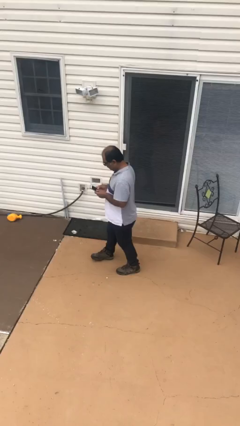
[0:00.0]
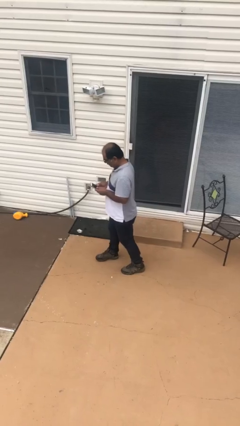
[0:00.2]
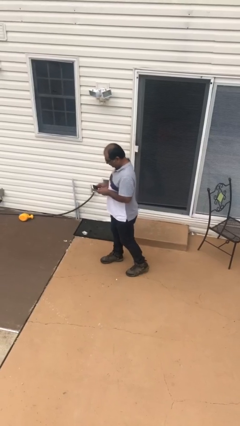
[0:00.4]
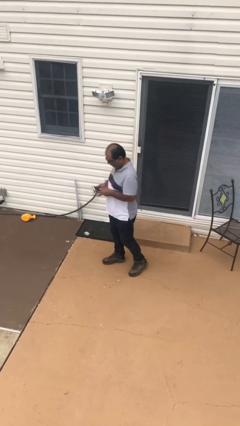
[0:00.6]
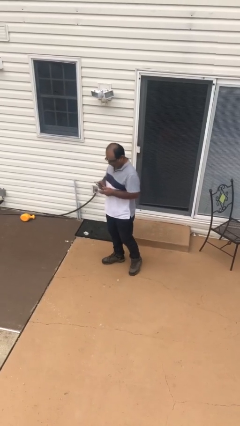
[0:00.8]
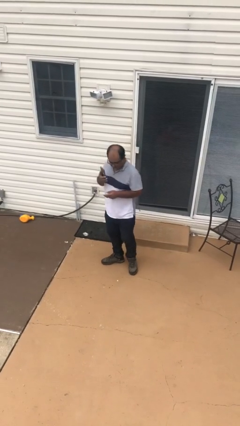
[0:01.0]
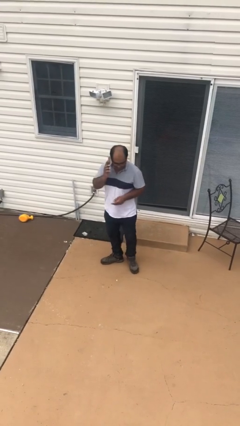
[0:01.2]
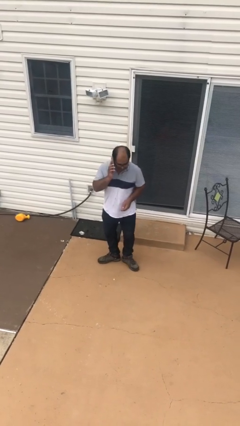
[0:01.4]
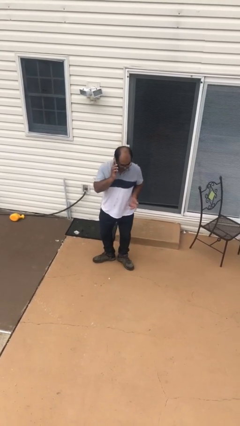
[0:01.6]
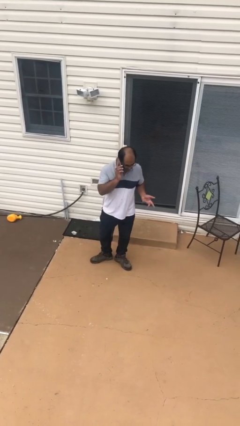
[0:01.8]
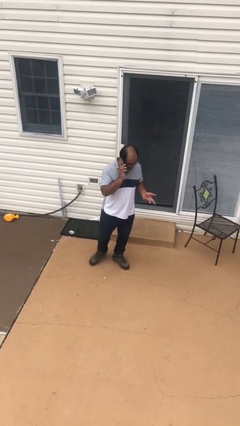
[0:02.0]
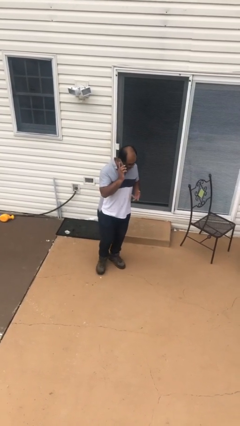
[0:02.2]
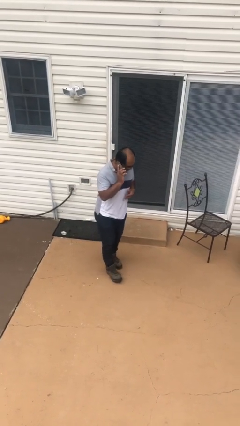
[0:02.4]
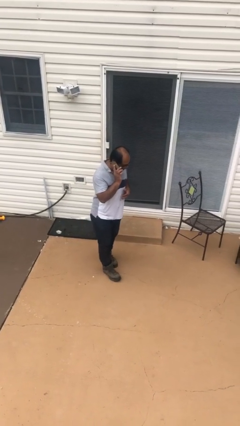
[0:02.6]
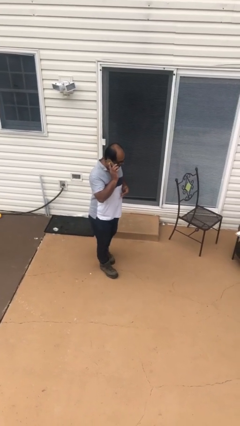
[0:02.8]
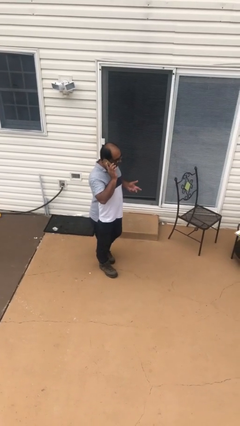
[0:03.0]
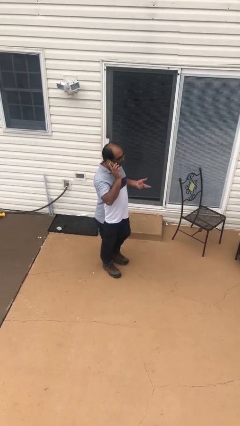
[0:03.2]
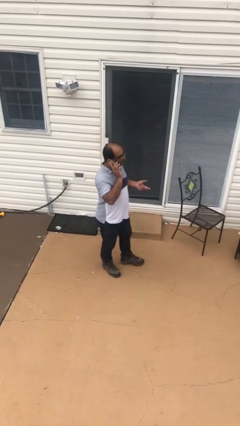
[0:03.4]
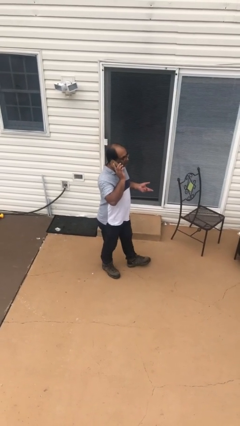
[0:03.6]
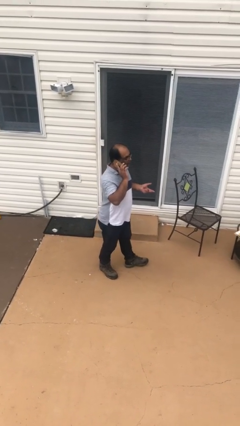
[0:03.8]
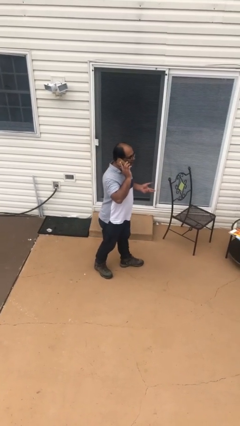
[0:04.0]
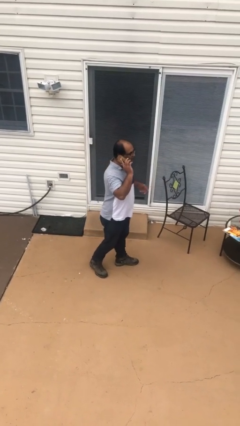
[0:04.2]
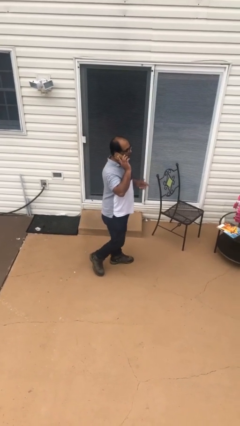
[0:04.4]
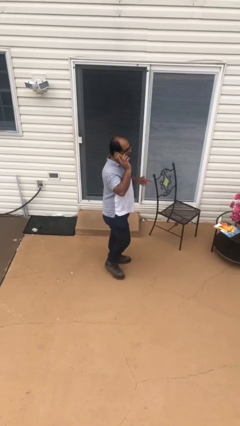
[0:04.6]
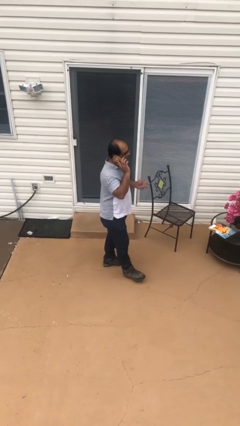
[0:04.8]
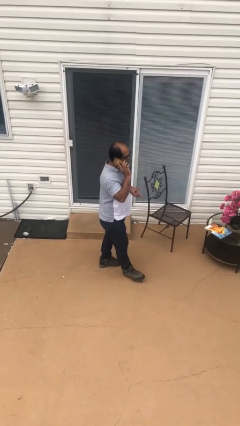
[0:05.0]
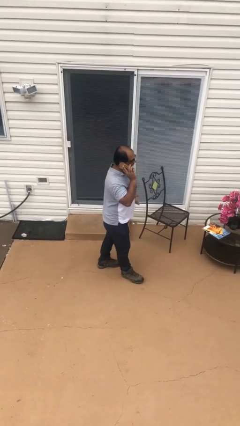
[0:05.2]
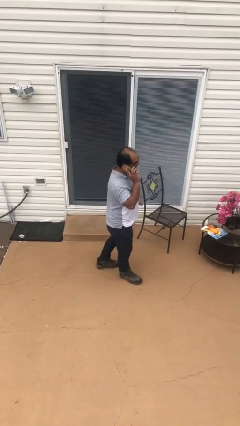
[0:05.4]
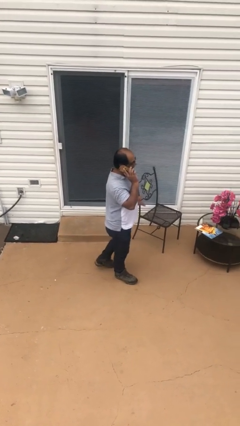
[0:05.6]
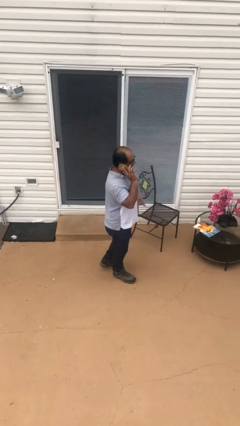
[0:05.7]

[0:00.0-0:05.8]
person talks on phone

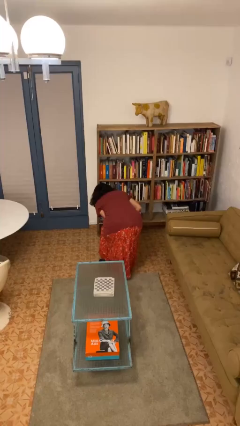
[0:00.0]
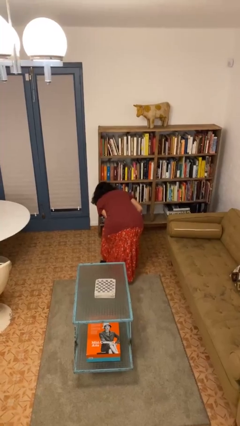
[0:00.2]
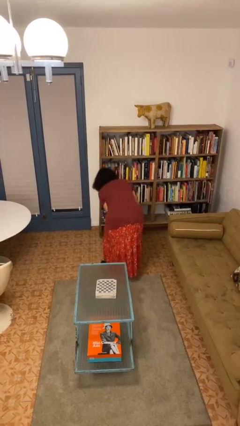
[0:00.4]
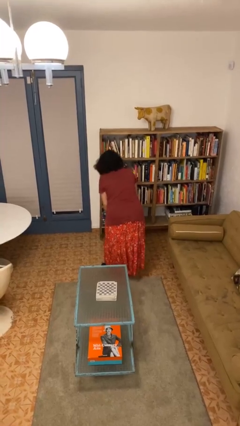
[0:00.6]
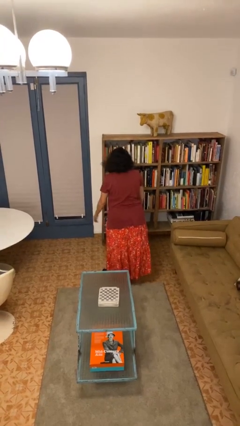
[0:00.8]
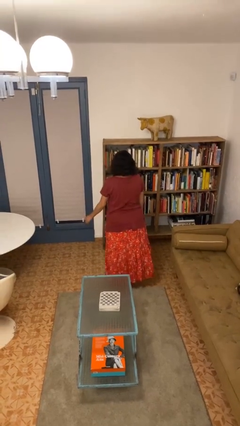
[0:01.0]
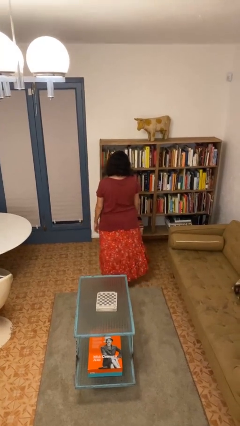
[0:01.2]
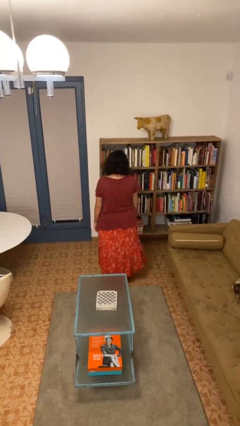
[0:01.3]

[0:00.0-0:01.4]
person stands up

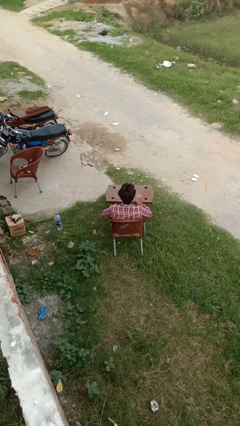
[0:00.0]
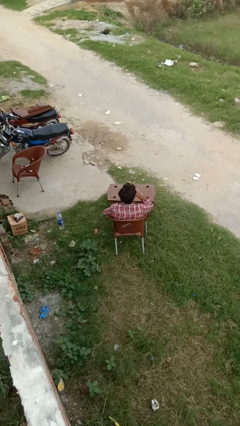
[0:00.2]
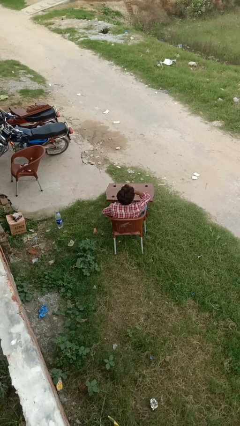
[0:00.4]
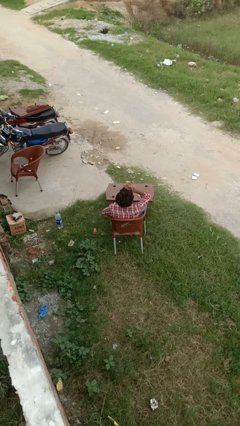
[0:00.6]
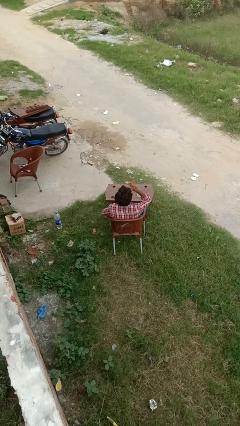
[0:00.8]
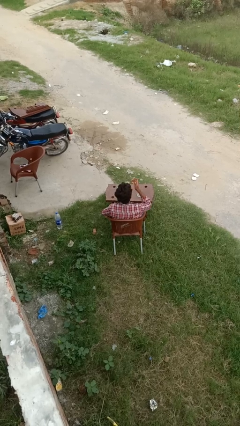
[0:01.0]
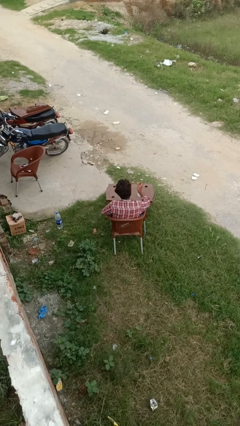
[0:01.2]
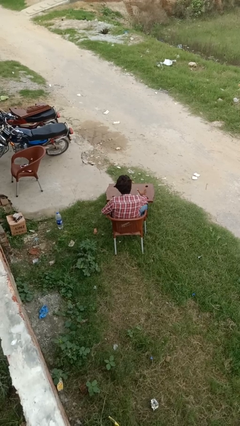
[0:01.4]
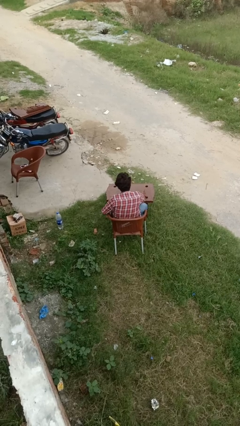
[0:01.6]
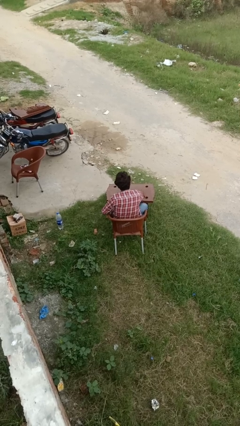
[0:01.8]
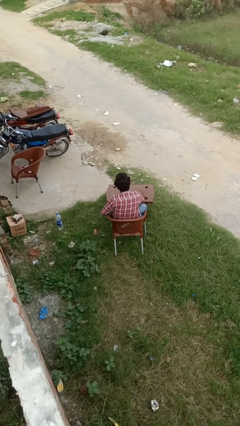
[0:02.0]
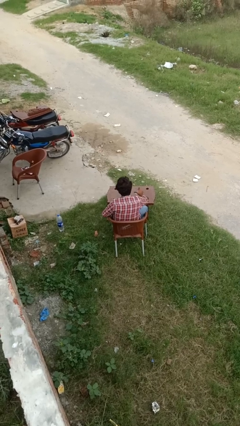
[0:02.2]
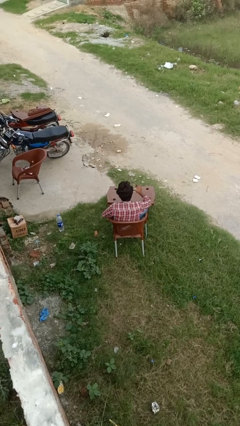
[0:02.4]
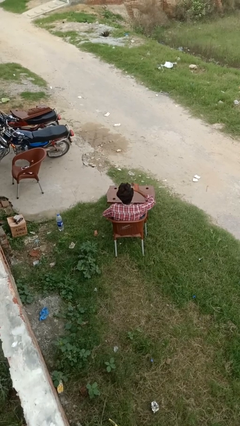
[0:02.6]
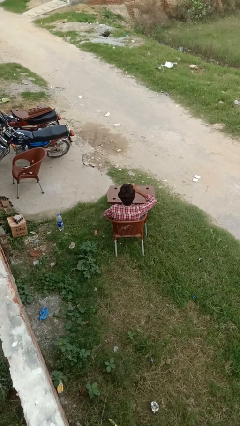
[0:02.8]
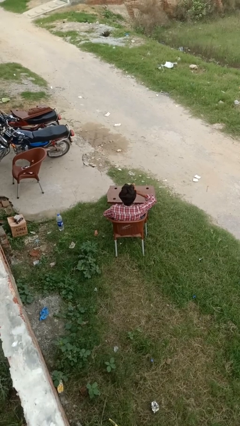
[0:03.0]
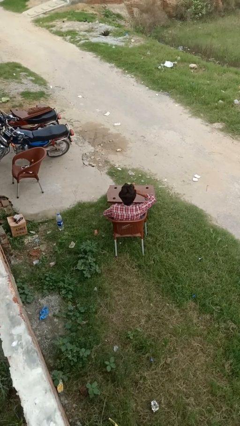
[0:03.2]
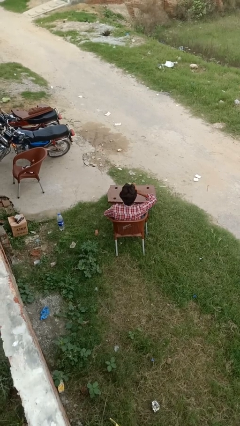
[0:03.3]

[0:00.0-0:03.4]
person drinks from cup

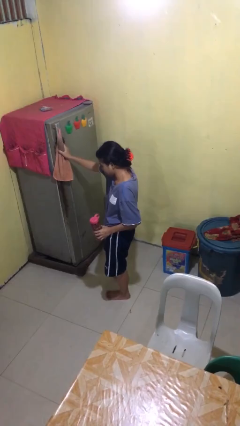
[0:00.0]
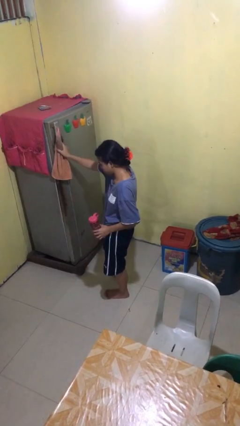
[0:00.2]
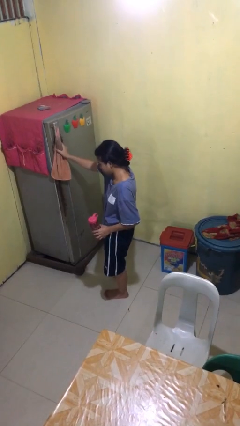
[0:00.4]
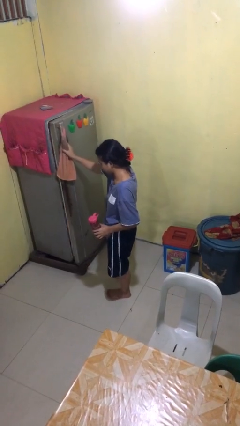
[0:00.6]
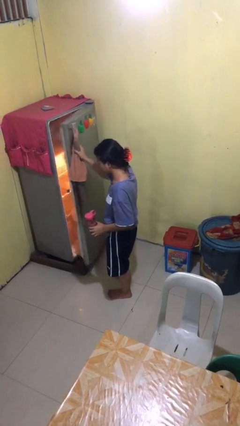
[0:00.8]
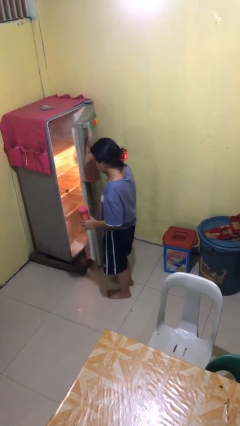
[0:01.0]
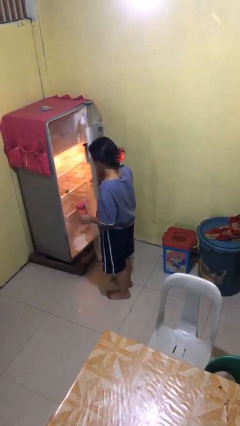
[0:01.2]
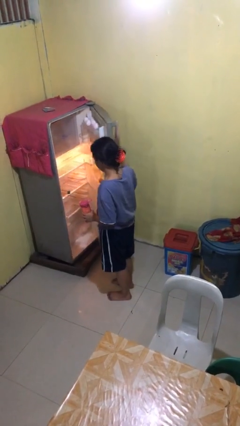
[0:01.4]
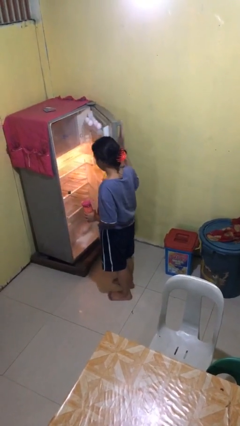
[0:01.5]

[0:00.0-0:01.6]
person opens refrigerator

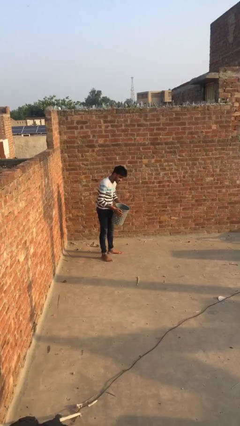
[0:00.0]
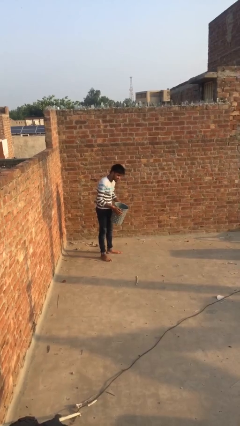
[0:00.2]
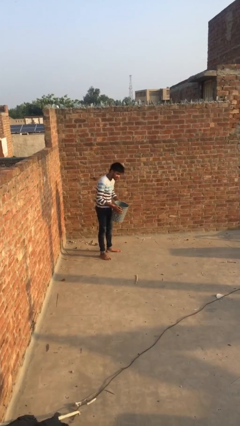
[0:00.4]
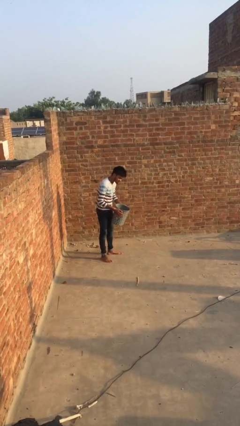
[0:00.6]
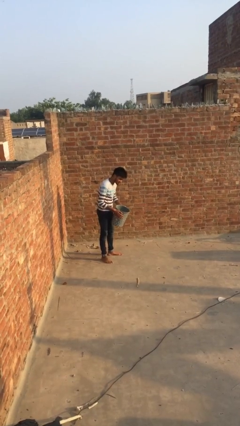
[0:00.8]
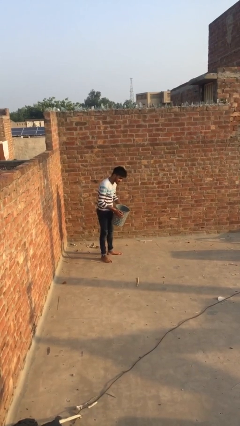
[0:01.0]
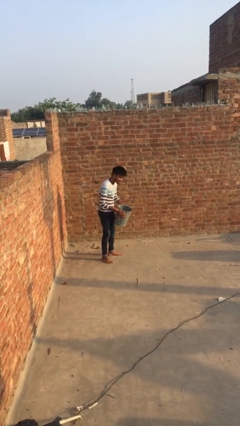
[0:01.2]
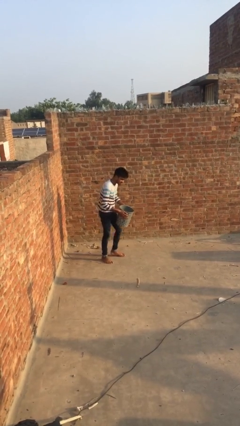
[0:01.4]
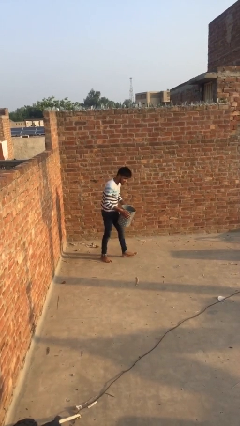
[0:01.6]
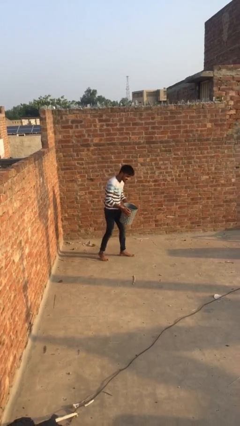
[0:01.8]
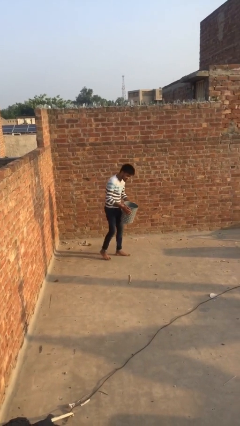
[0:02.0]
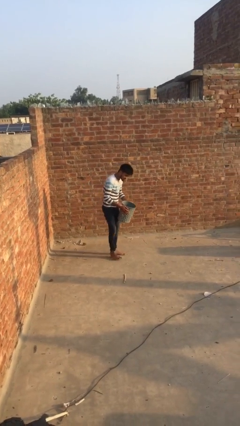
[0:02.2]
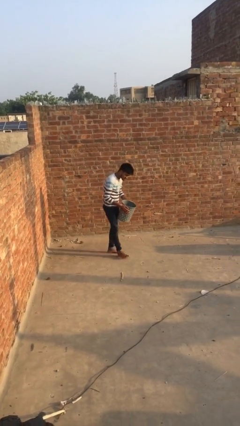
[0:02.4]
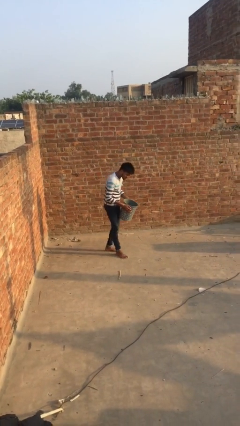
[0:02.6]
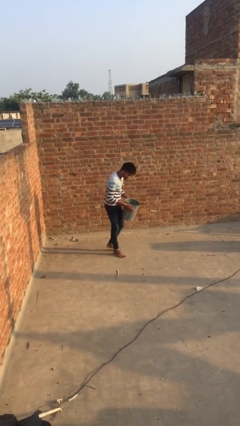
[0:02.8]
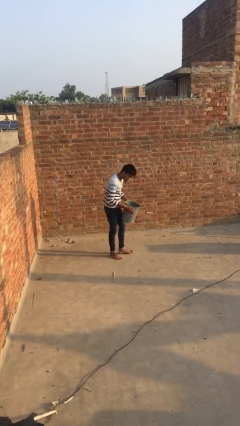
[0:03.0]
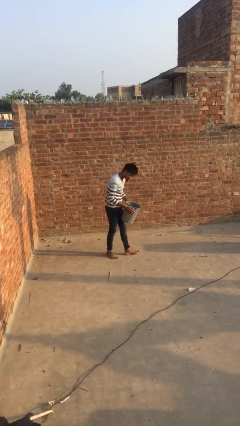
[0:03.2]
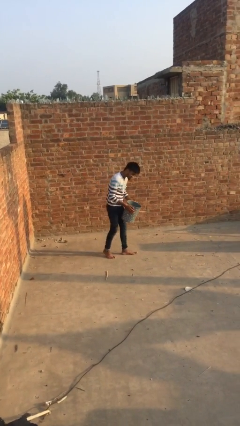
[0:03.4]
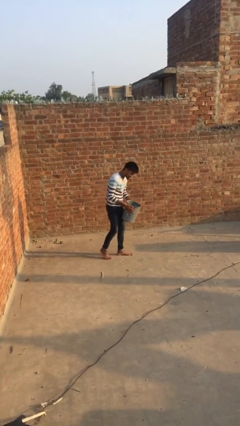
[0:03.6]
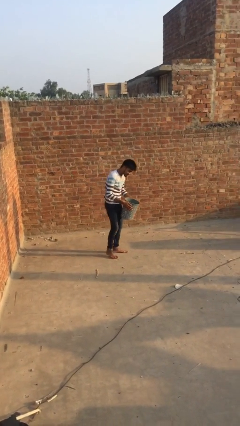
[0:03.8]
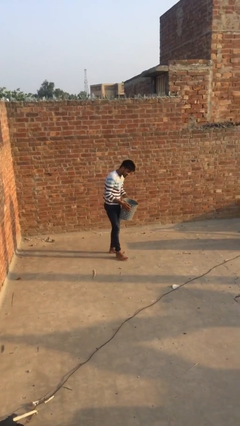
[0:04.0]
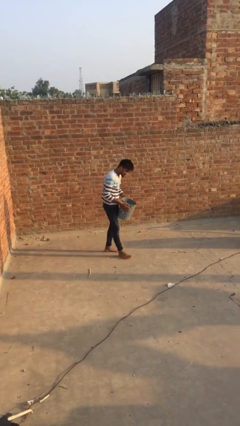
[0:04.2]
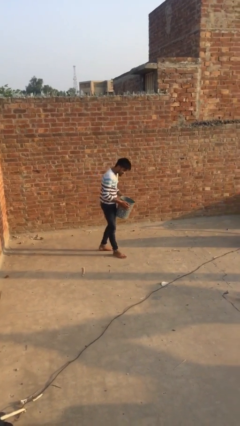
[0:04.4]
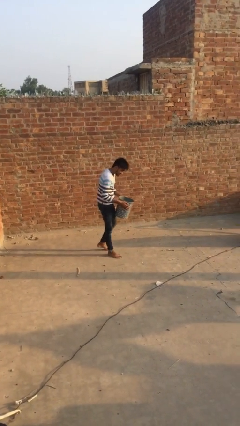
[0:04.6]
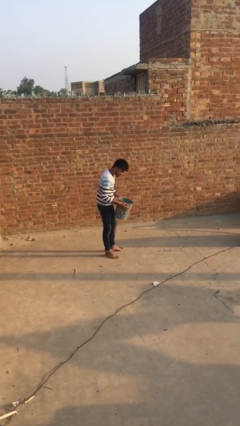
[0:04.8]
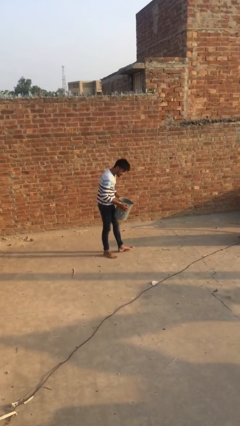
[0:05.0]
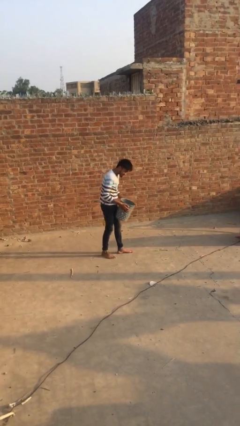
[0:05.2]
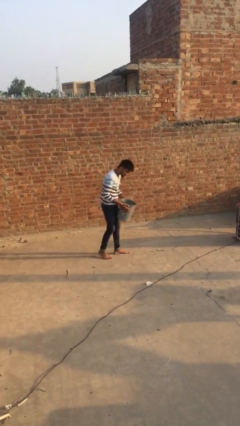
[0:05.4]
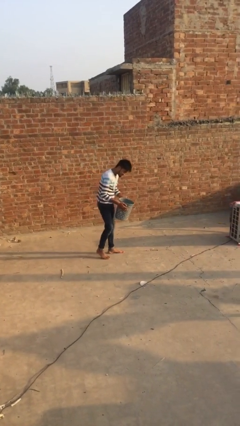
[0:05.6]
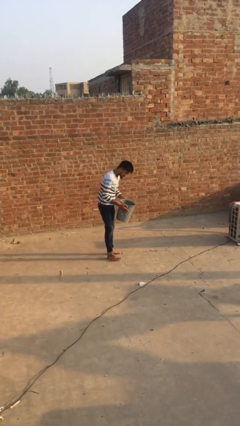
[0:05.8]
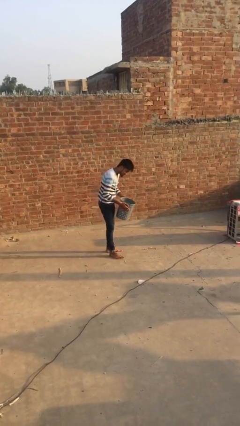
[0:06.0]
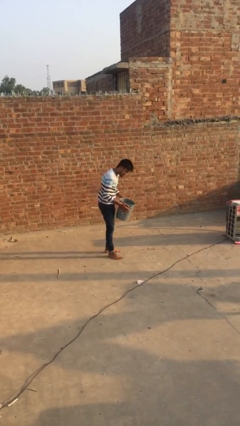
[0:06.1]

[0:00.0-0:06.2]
person carries heavy object
